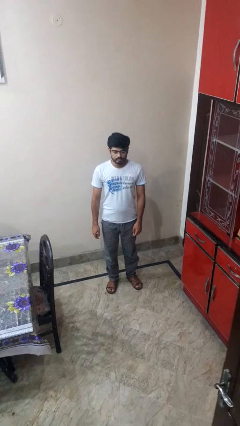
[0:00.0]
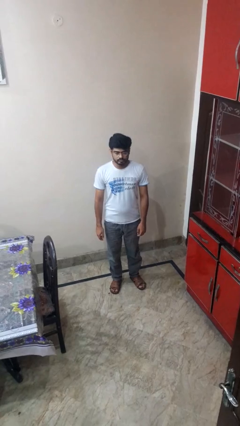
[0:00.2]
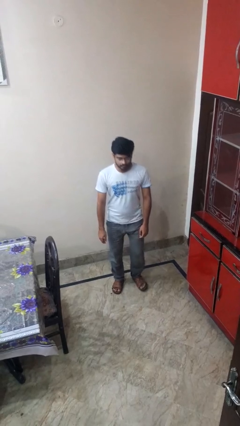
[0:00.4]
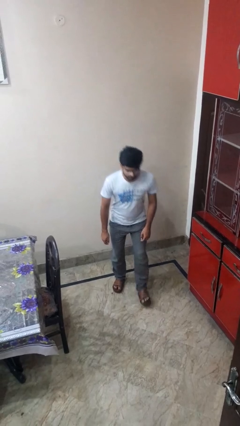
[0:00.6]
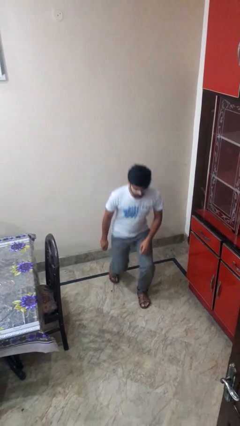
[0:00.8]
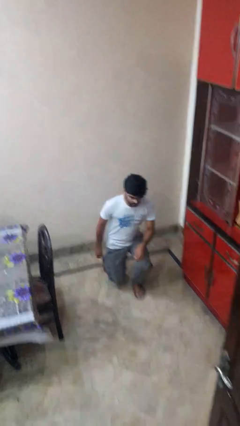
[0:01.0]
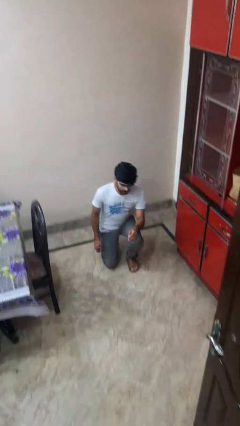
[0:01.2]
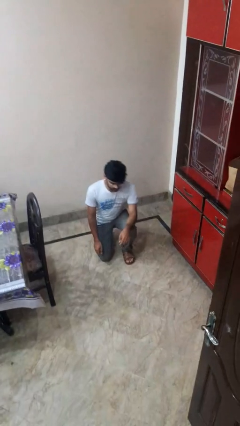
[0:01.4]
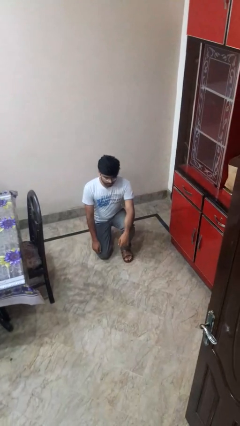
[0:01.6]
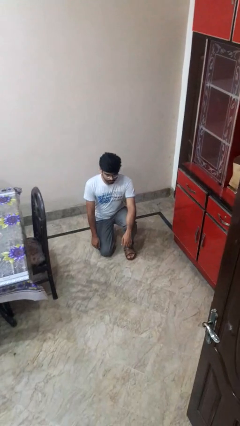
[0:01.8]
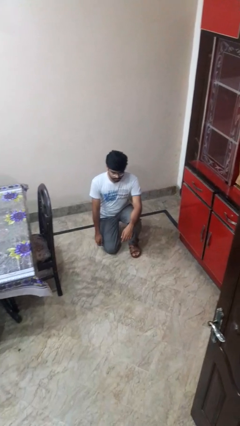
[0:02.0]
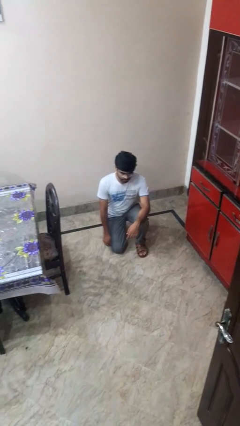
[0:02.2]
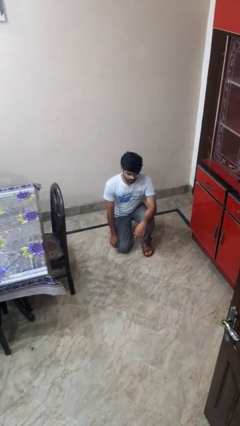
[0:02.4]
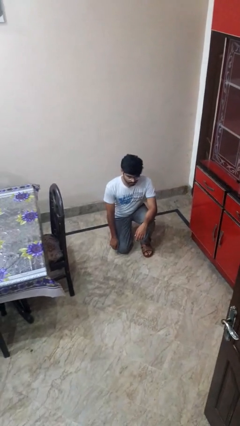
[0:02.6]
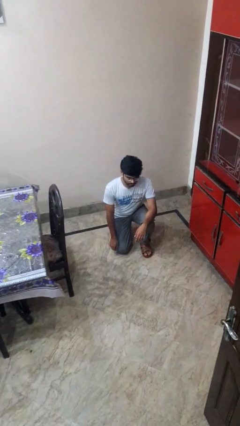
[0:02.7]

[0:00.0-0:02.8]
person kneels

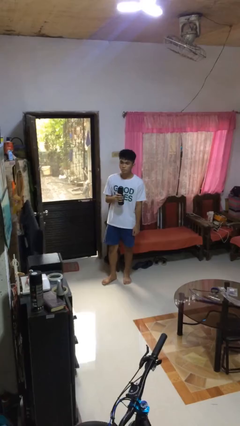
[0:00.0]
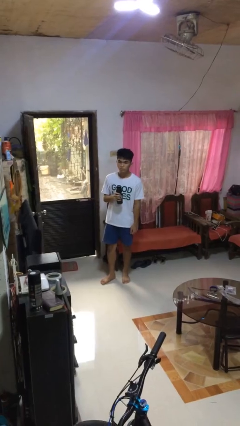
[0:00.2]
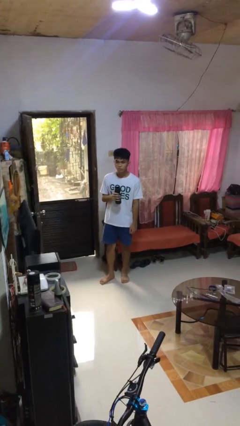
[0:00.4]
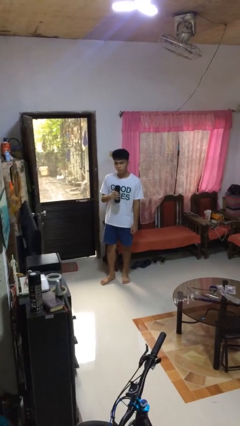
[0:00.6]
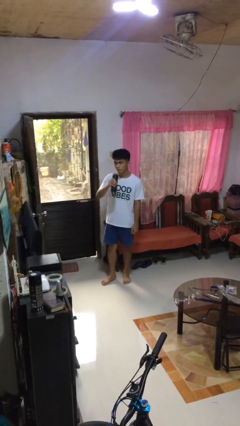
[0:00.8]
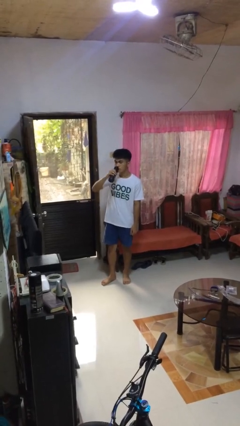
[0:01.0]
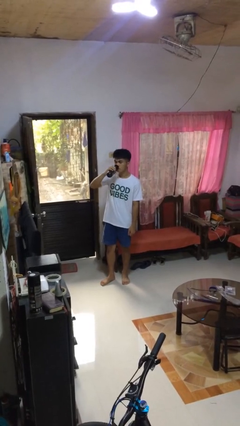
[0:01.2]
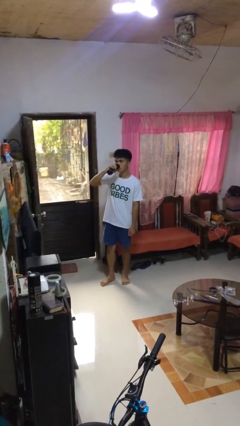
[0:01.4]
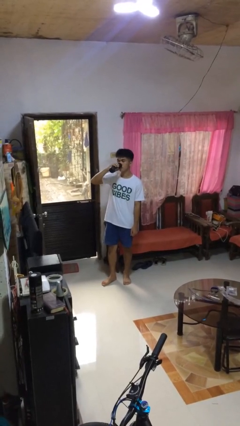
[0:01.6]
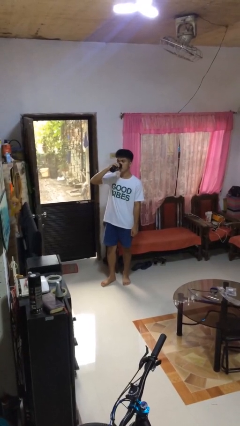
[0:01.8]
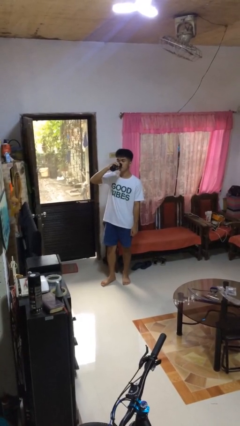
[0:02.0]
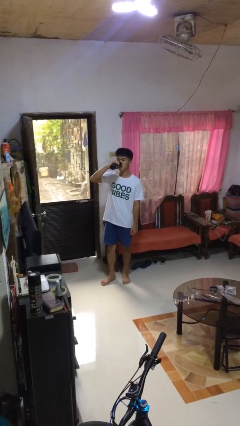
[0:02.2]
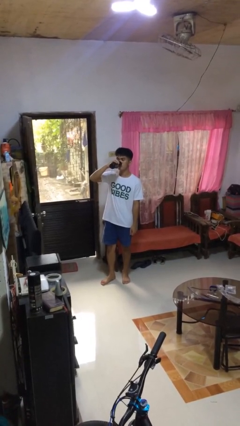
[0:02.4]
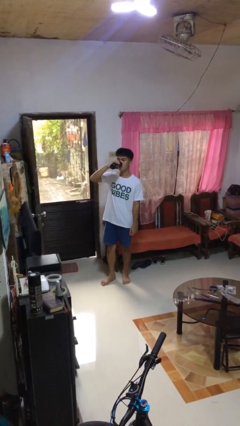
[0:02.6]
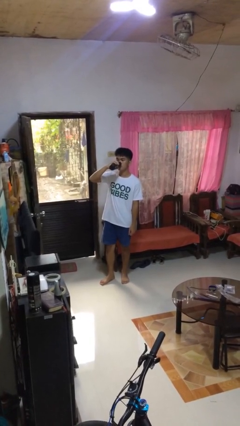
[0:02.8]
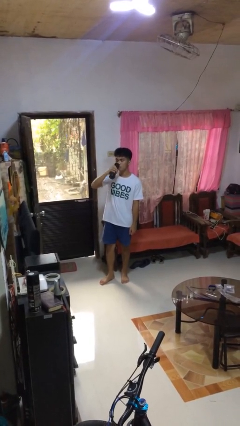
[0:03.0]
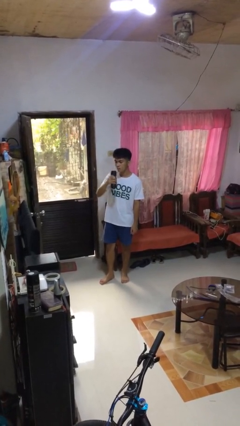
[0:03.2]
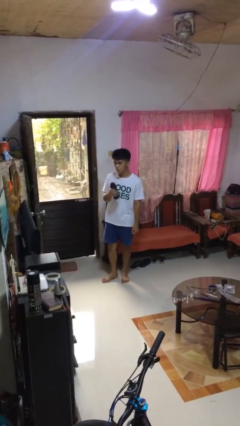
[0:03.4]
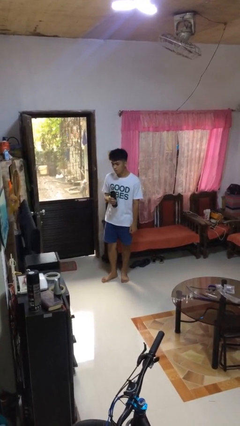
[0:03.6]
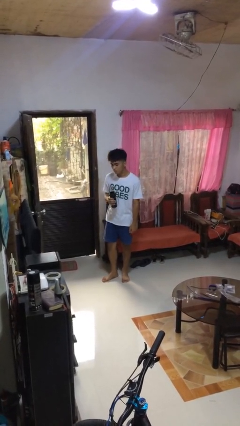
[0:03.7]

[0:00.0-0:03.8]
person drinks from bottle

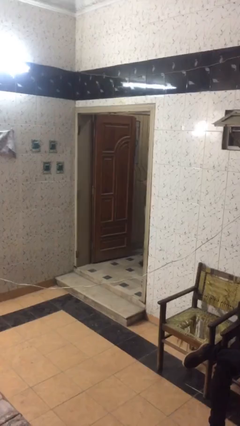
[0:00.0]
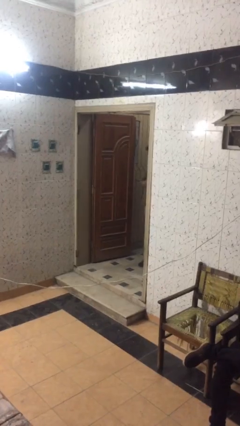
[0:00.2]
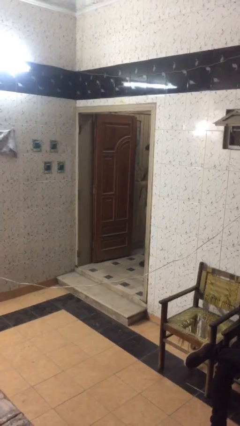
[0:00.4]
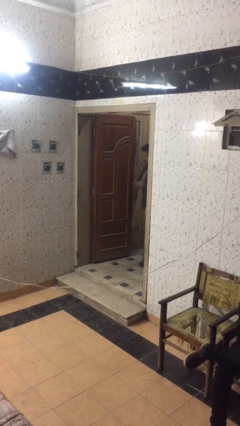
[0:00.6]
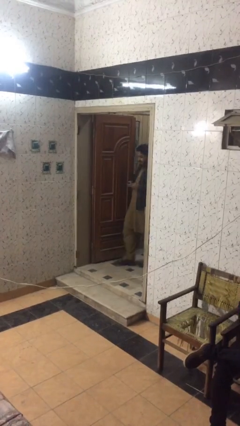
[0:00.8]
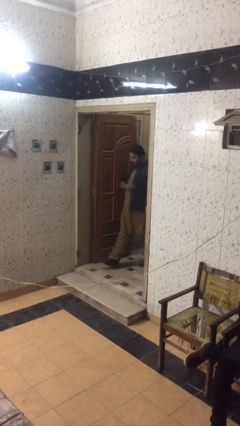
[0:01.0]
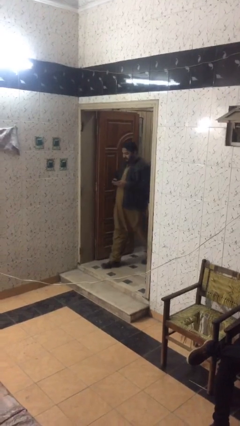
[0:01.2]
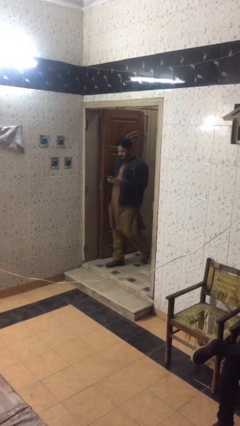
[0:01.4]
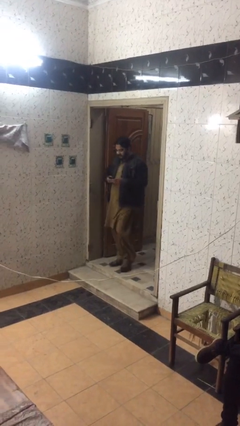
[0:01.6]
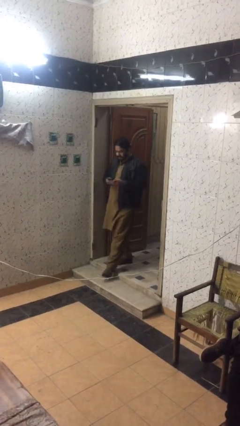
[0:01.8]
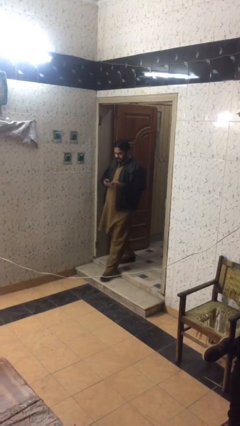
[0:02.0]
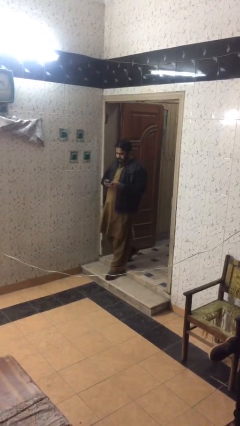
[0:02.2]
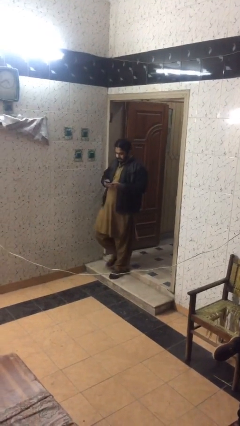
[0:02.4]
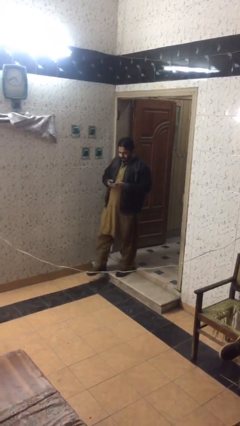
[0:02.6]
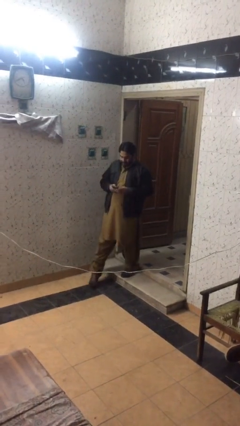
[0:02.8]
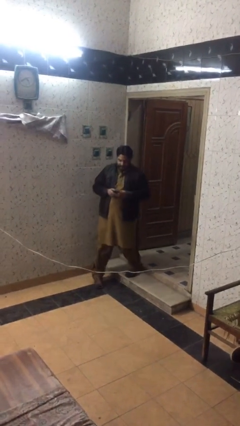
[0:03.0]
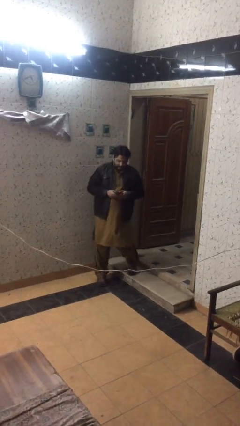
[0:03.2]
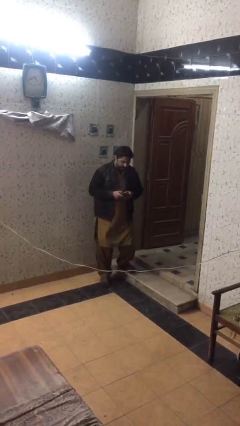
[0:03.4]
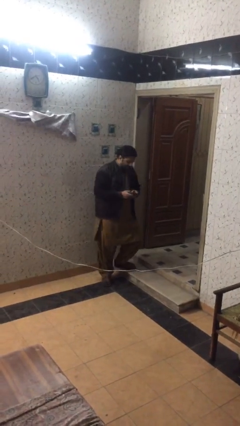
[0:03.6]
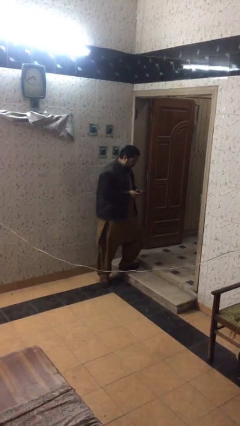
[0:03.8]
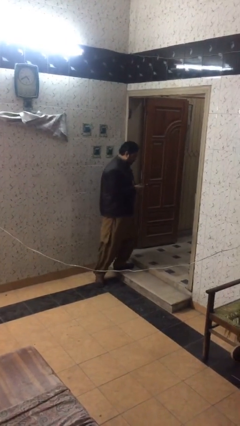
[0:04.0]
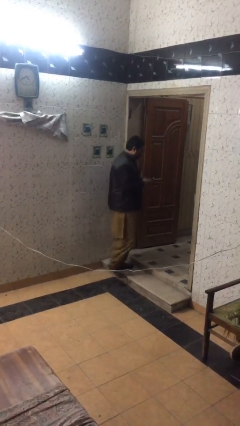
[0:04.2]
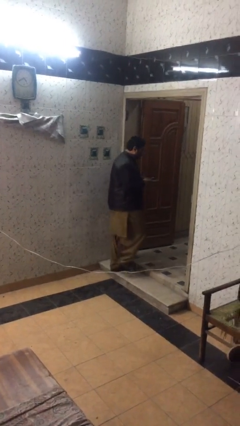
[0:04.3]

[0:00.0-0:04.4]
person enters scene through structure

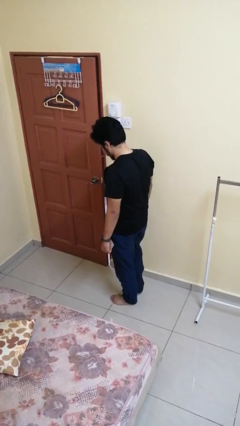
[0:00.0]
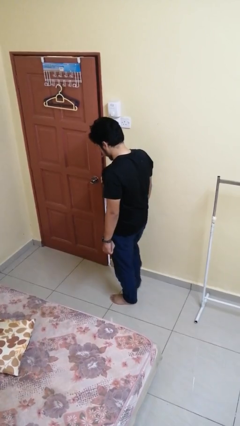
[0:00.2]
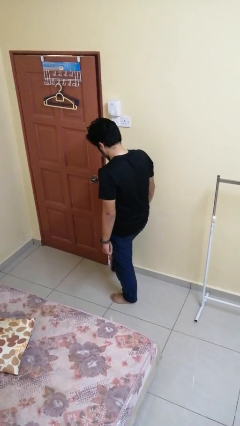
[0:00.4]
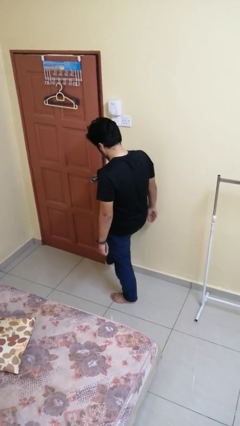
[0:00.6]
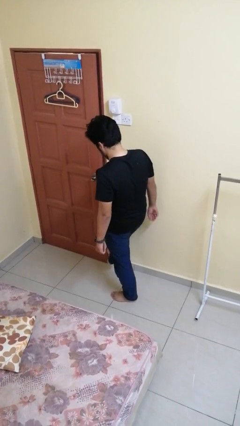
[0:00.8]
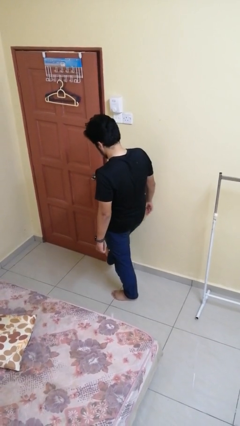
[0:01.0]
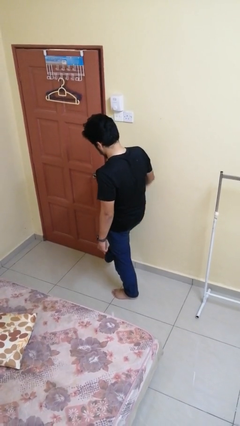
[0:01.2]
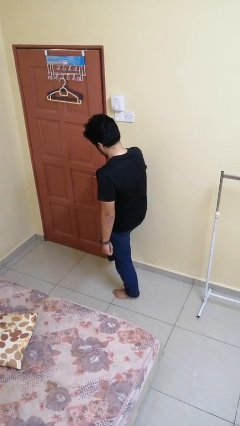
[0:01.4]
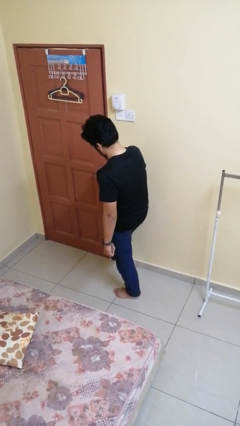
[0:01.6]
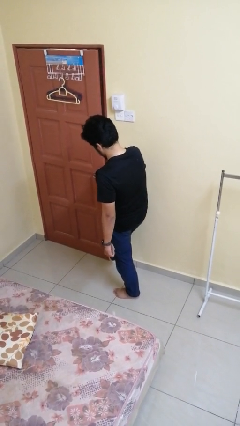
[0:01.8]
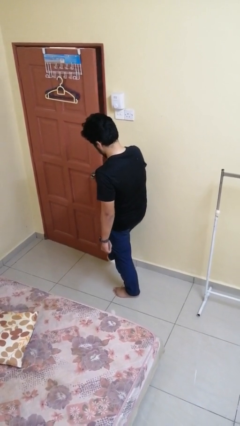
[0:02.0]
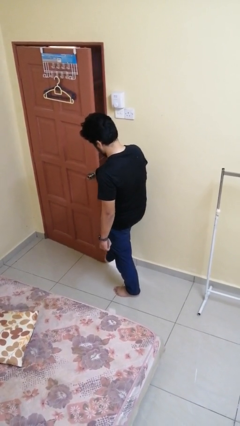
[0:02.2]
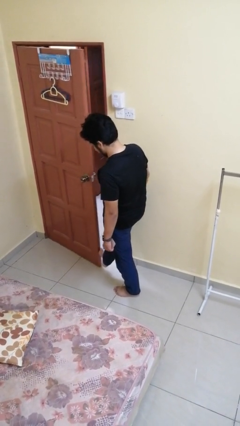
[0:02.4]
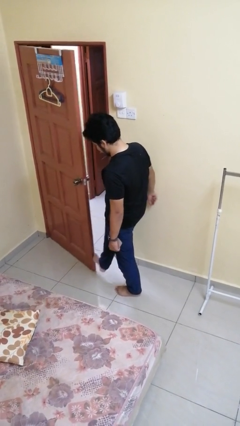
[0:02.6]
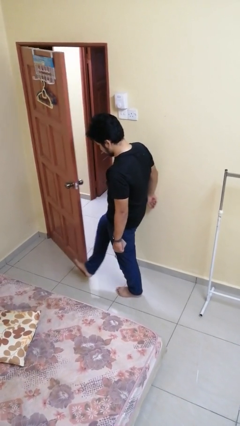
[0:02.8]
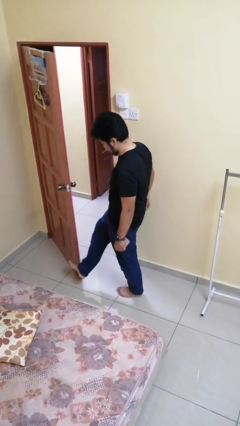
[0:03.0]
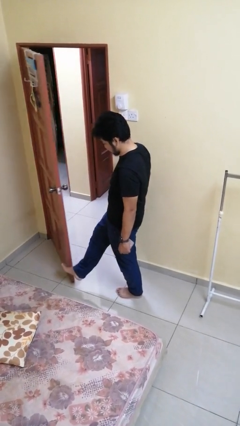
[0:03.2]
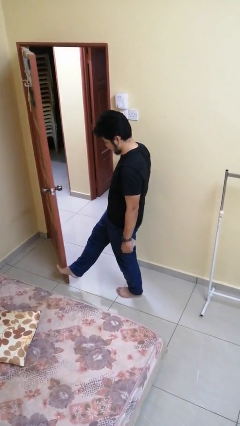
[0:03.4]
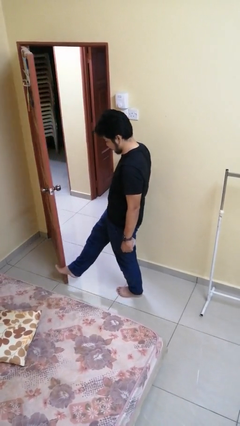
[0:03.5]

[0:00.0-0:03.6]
person opens facility door

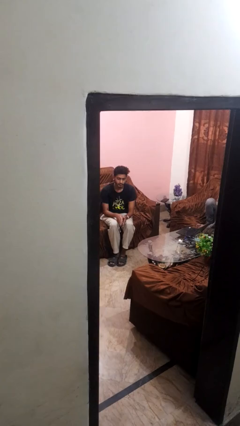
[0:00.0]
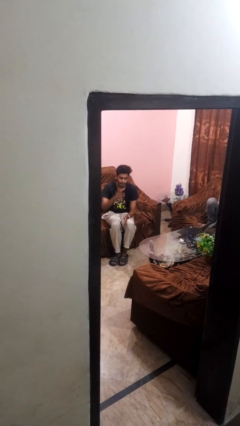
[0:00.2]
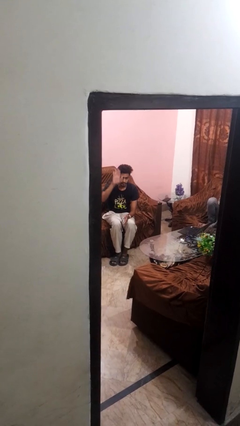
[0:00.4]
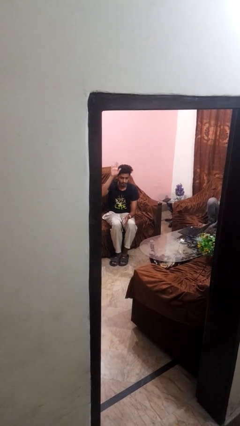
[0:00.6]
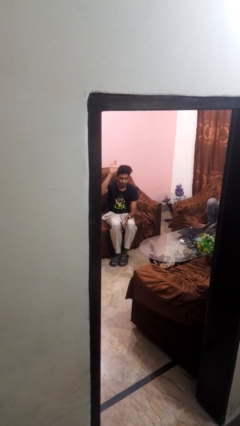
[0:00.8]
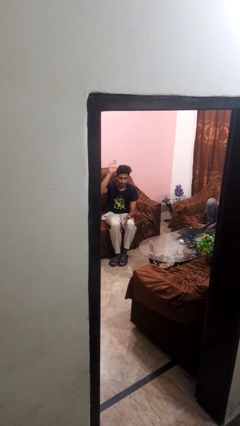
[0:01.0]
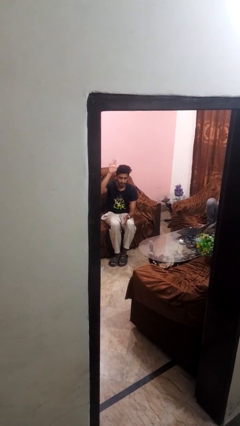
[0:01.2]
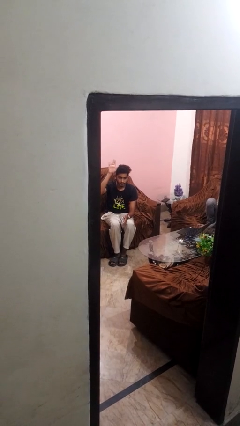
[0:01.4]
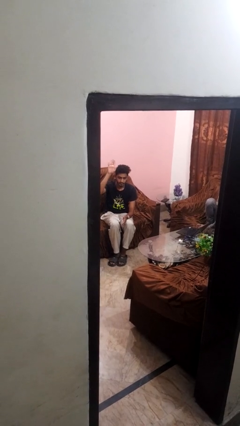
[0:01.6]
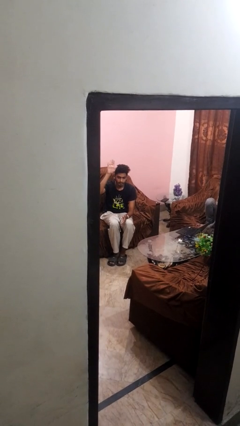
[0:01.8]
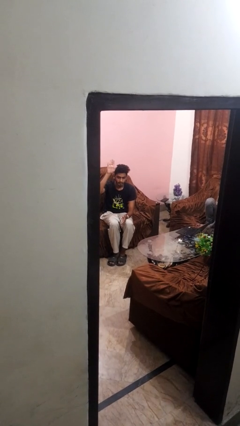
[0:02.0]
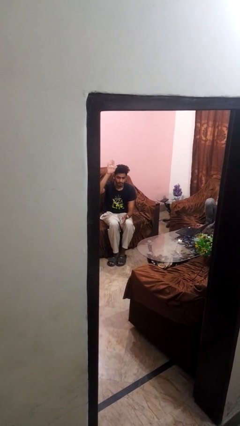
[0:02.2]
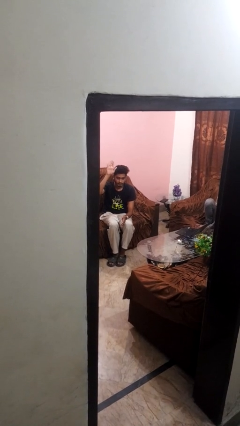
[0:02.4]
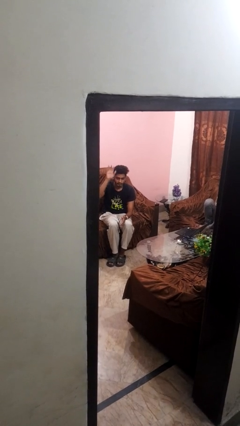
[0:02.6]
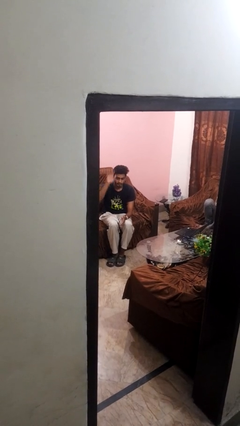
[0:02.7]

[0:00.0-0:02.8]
person gestures raise hand
